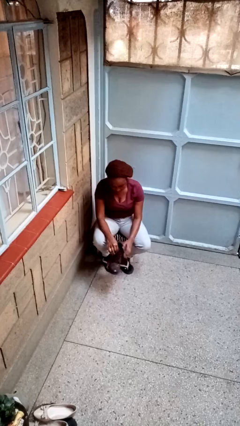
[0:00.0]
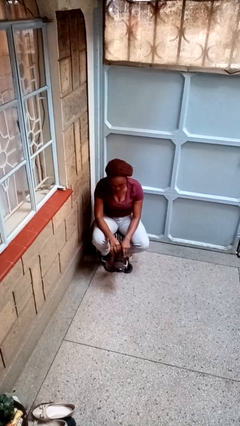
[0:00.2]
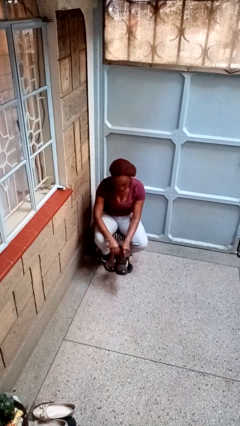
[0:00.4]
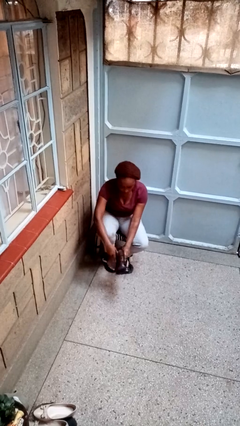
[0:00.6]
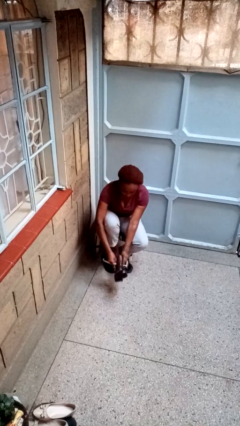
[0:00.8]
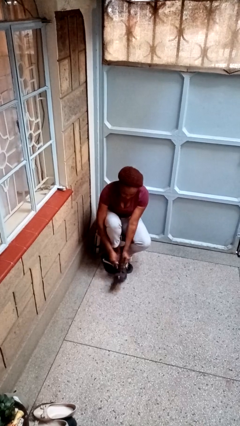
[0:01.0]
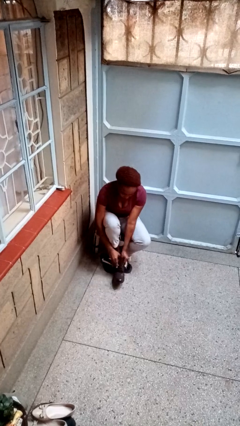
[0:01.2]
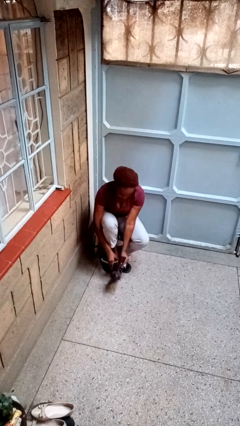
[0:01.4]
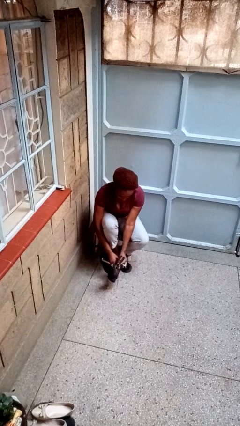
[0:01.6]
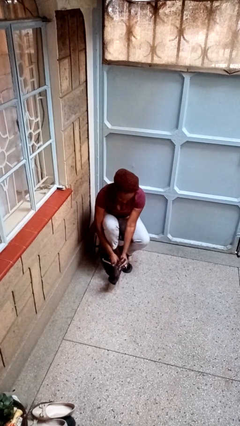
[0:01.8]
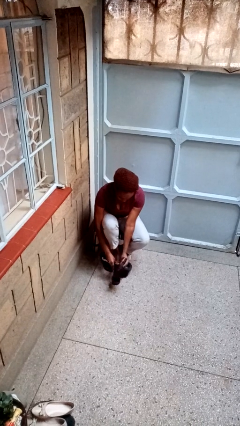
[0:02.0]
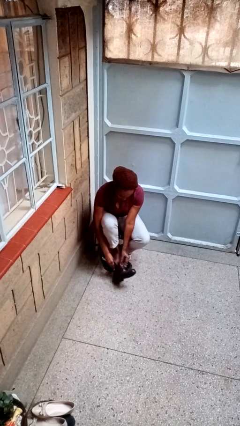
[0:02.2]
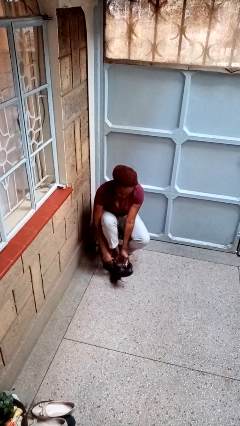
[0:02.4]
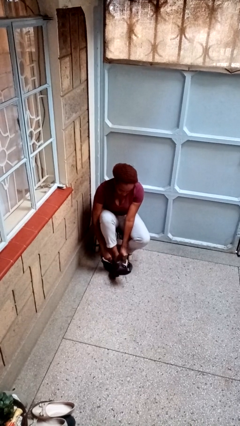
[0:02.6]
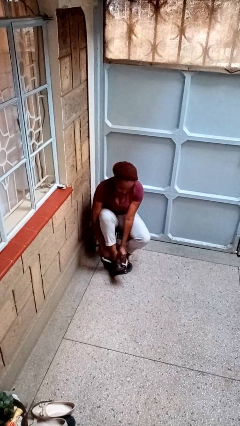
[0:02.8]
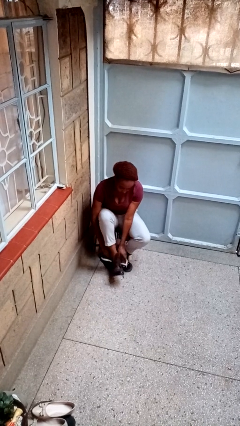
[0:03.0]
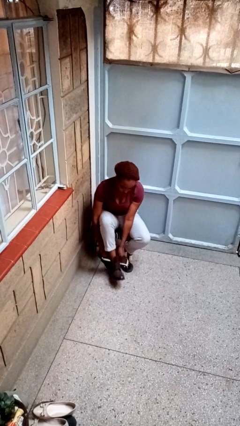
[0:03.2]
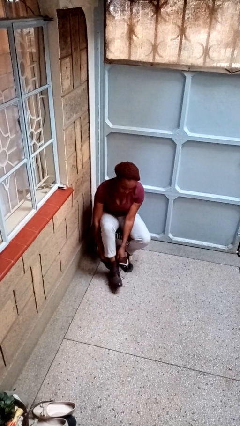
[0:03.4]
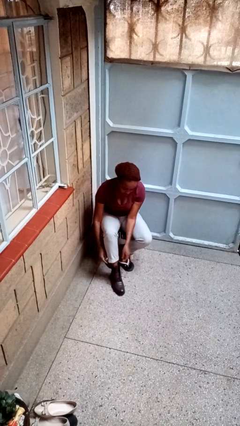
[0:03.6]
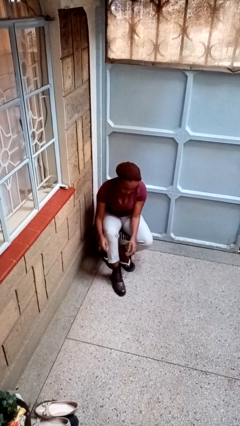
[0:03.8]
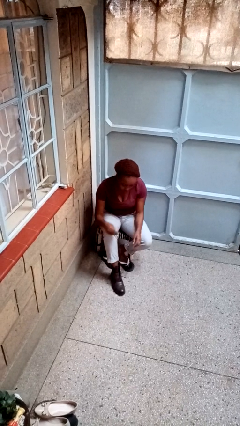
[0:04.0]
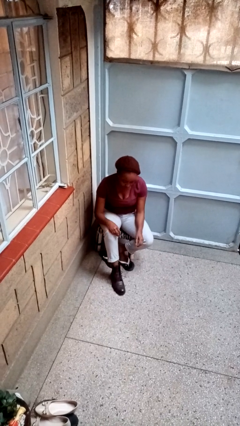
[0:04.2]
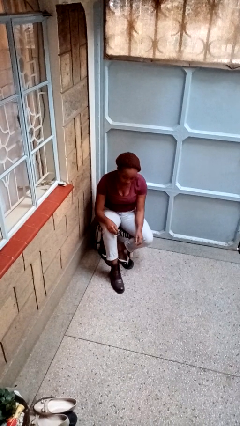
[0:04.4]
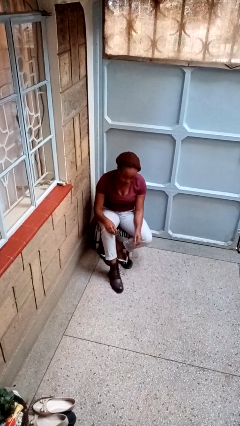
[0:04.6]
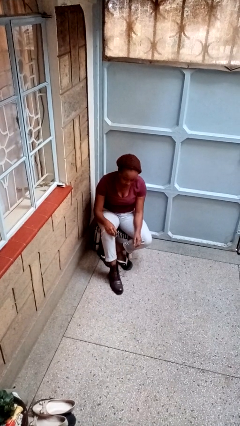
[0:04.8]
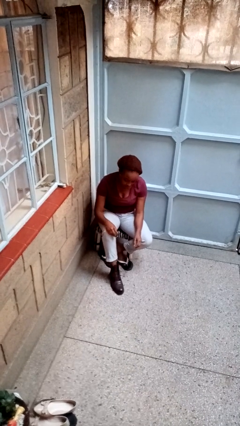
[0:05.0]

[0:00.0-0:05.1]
person puts on boots

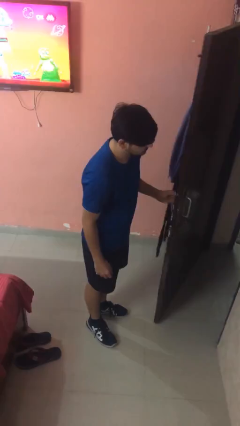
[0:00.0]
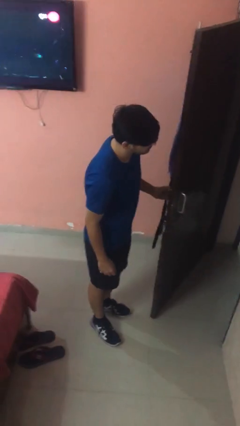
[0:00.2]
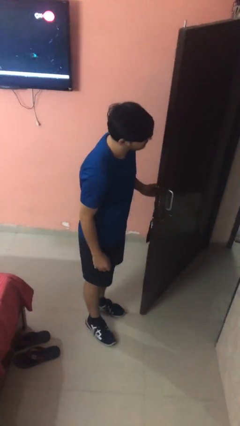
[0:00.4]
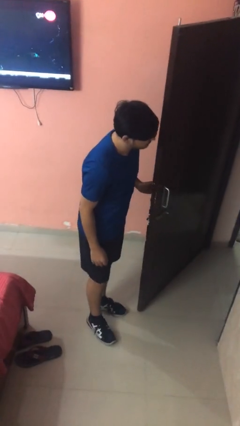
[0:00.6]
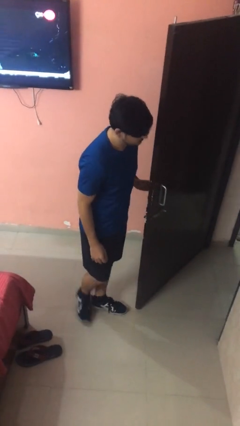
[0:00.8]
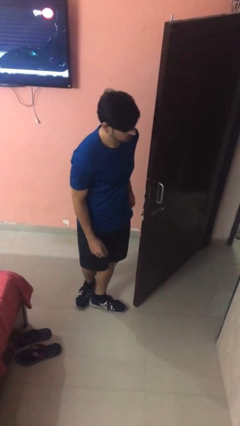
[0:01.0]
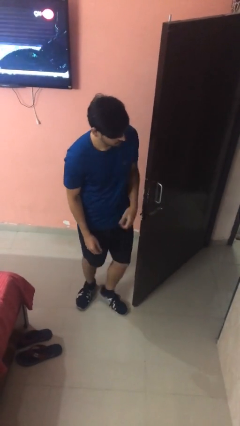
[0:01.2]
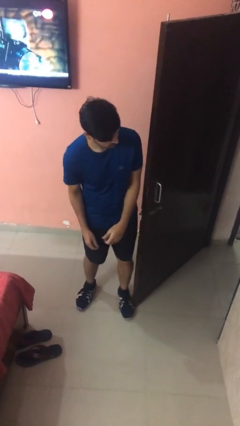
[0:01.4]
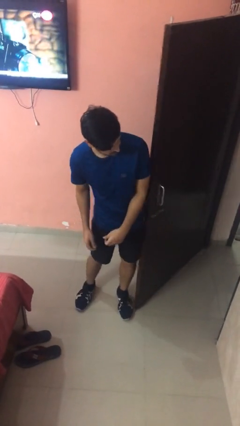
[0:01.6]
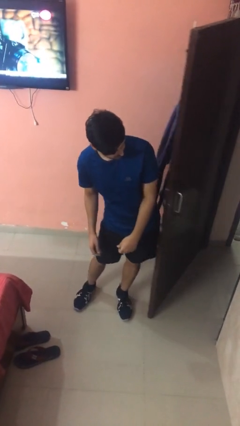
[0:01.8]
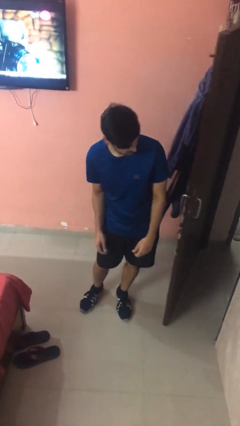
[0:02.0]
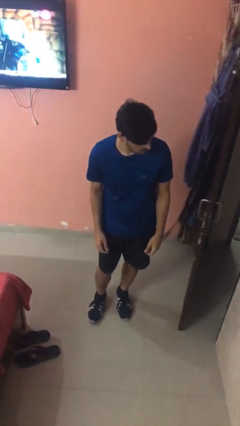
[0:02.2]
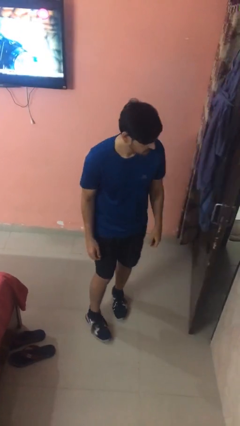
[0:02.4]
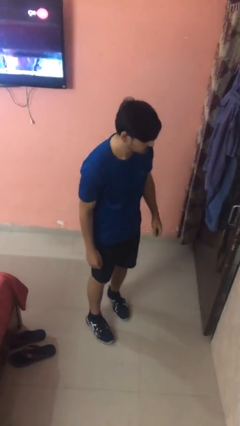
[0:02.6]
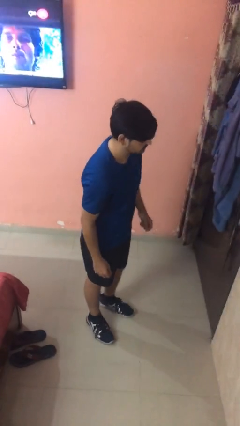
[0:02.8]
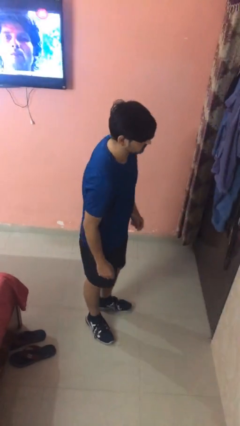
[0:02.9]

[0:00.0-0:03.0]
person closes door with hip

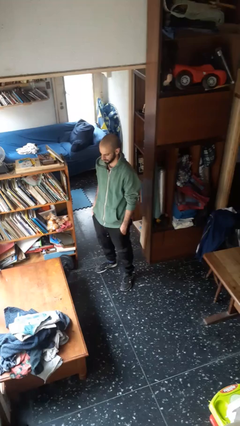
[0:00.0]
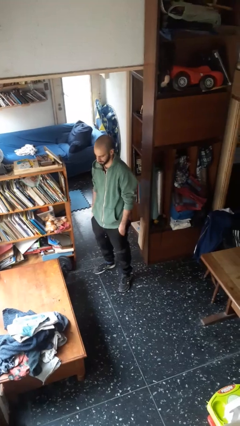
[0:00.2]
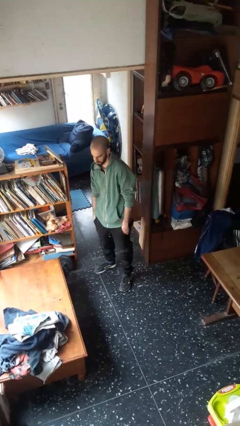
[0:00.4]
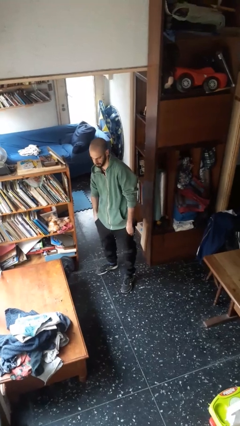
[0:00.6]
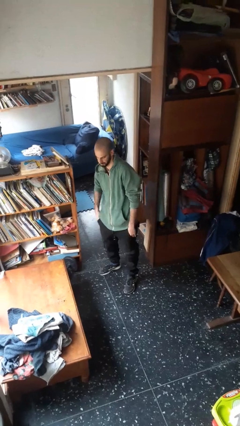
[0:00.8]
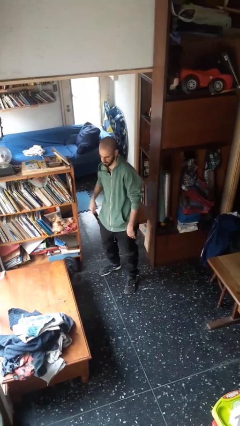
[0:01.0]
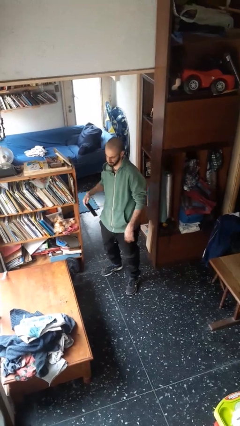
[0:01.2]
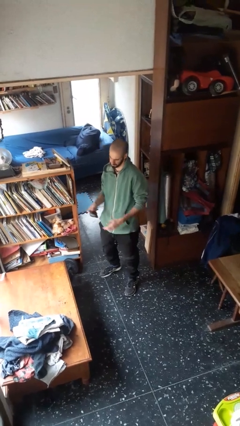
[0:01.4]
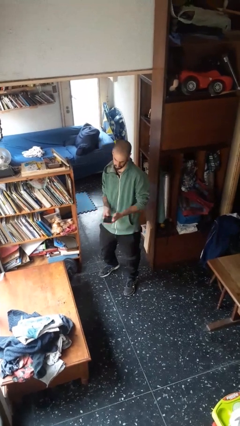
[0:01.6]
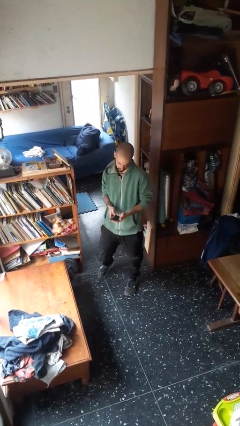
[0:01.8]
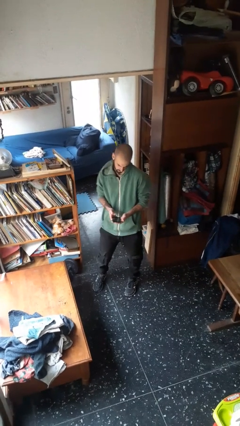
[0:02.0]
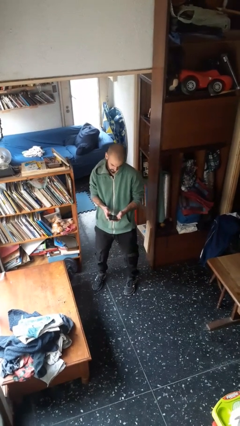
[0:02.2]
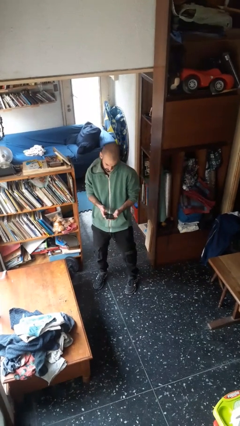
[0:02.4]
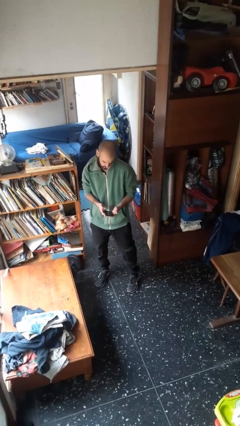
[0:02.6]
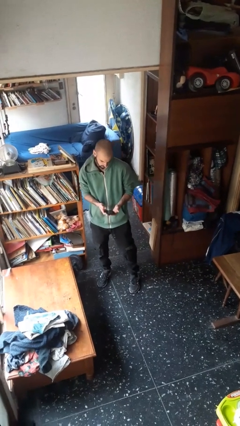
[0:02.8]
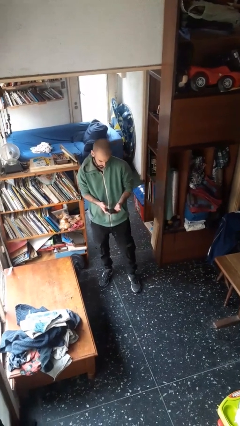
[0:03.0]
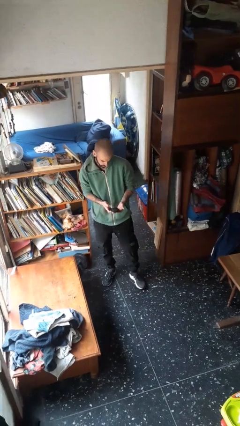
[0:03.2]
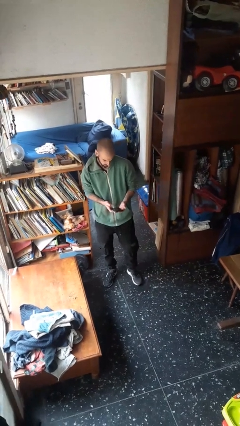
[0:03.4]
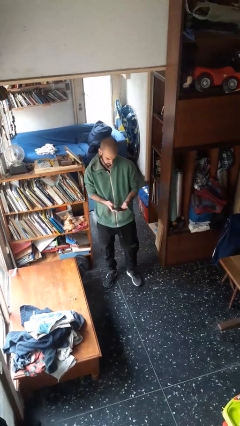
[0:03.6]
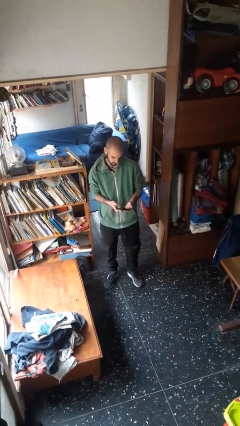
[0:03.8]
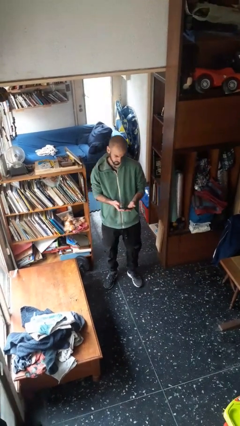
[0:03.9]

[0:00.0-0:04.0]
person takes phone from pocket

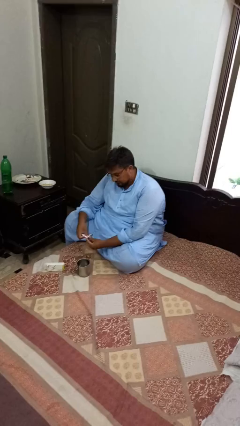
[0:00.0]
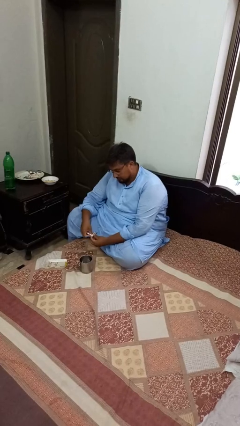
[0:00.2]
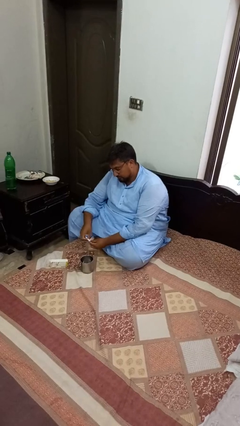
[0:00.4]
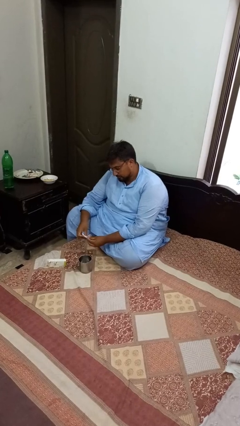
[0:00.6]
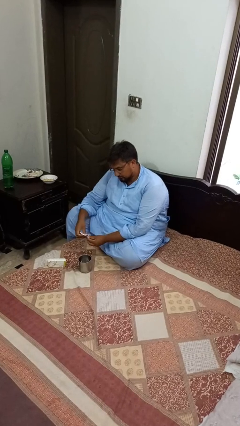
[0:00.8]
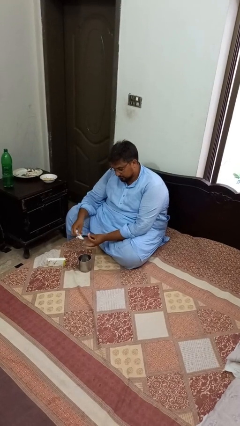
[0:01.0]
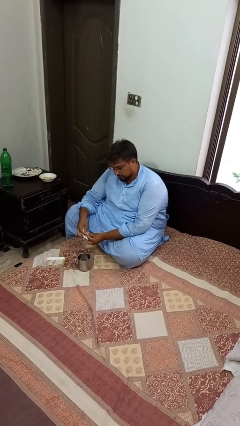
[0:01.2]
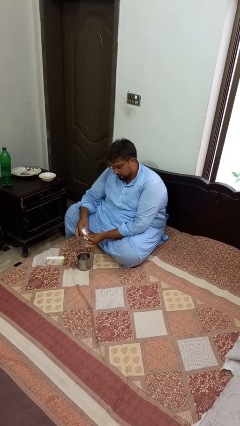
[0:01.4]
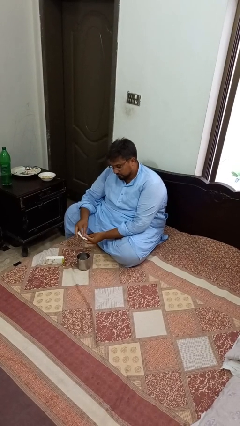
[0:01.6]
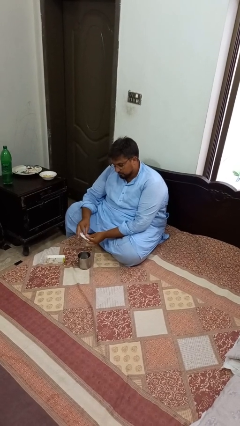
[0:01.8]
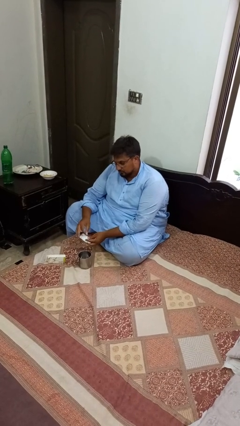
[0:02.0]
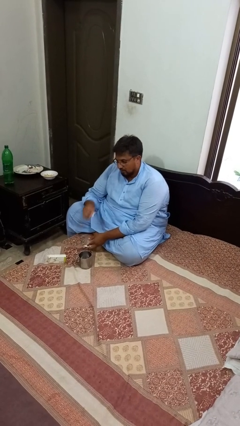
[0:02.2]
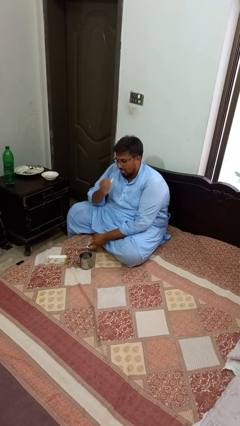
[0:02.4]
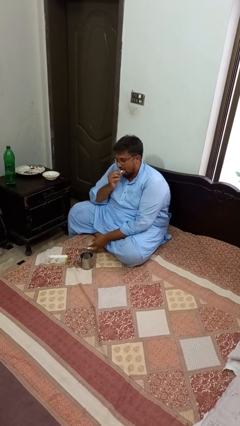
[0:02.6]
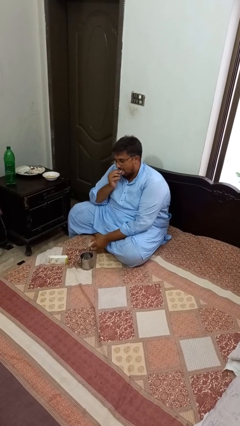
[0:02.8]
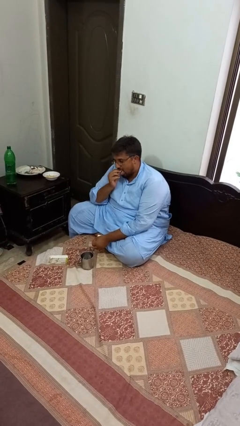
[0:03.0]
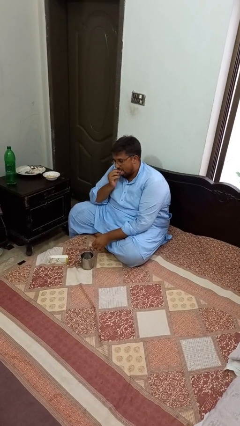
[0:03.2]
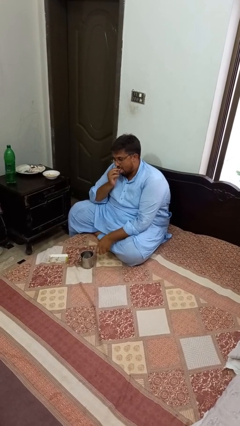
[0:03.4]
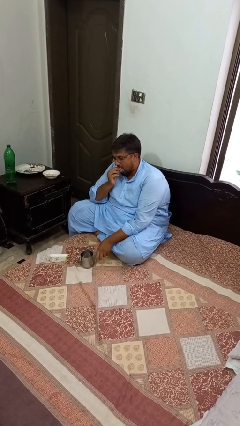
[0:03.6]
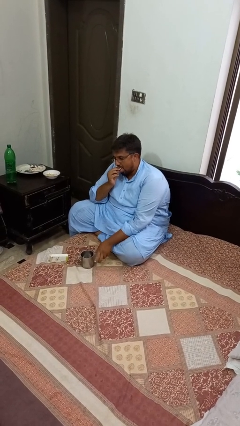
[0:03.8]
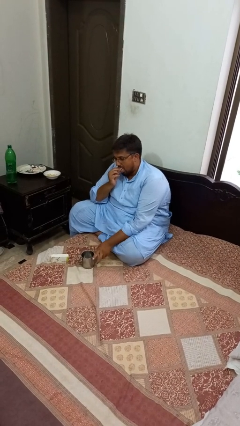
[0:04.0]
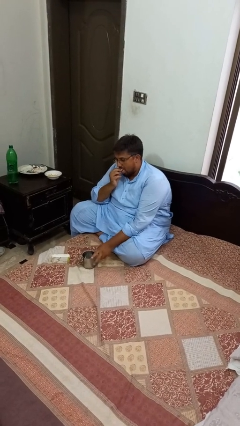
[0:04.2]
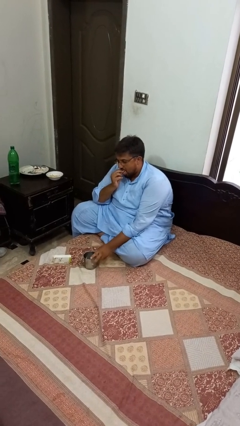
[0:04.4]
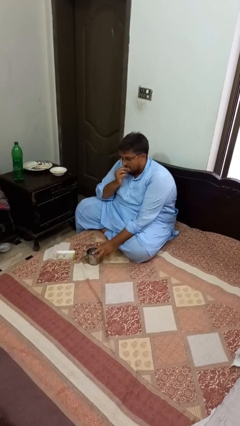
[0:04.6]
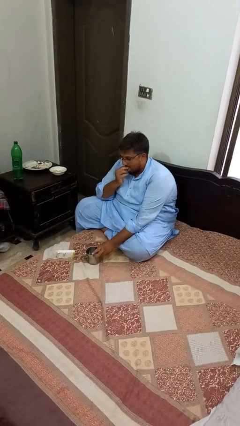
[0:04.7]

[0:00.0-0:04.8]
person takes medicine pills

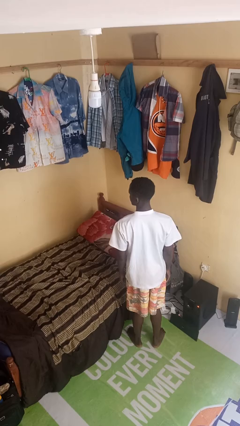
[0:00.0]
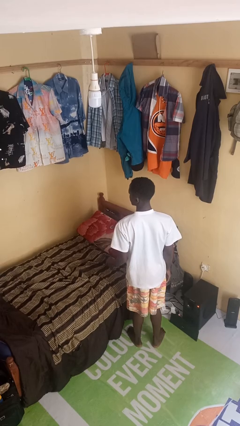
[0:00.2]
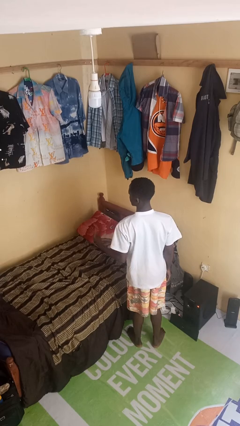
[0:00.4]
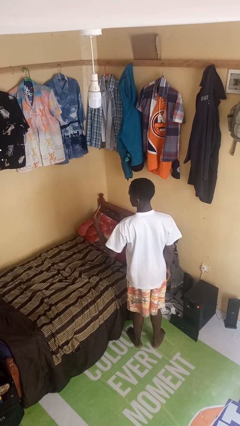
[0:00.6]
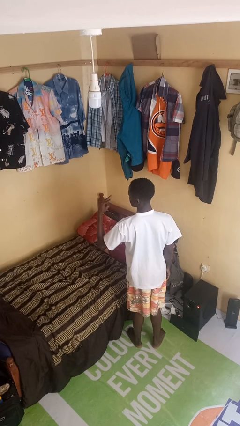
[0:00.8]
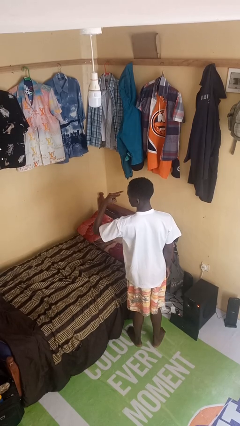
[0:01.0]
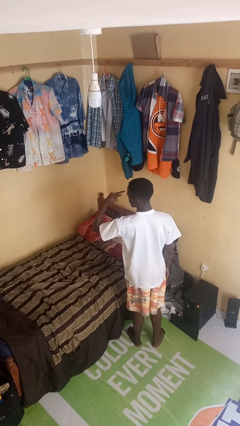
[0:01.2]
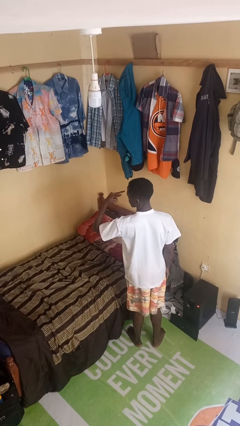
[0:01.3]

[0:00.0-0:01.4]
person gestures watch closely
